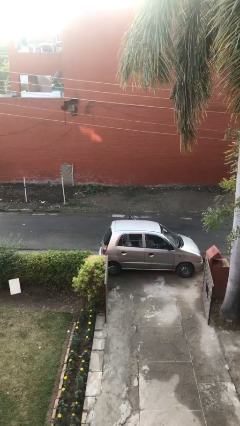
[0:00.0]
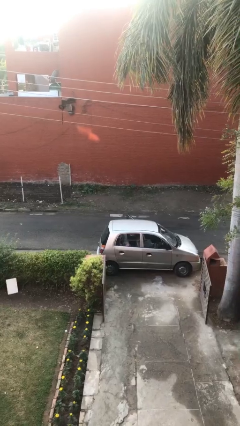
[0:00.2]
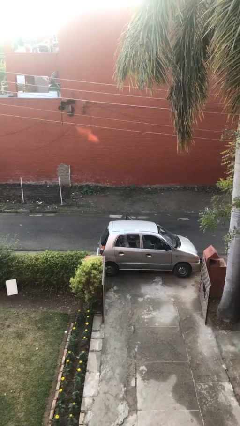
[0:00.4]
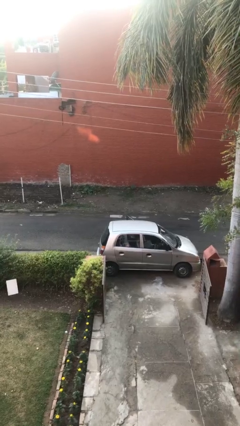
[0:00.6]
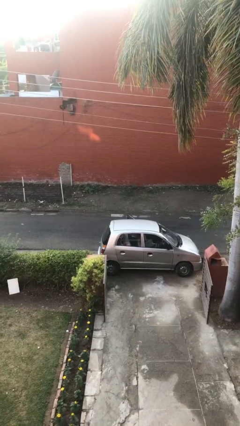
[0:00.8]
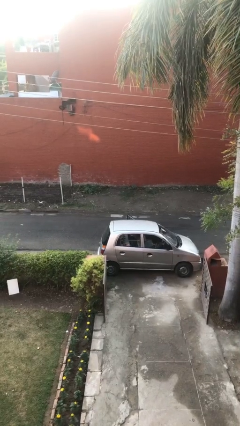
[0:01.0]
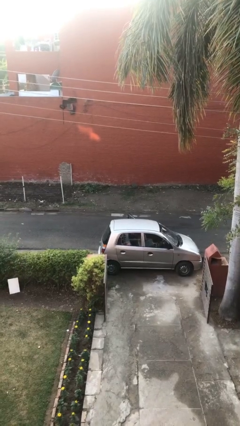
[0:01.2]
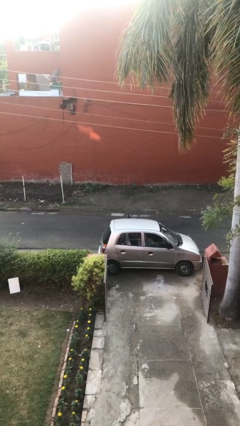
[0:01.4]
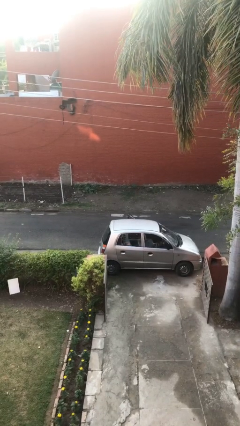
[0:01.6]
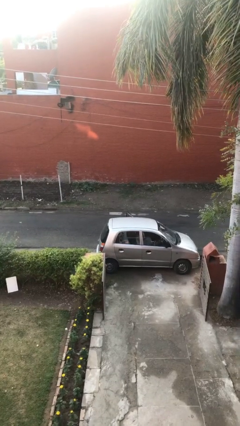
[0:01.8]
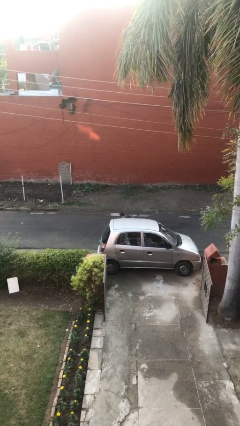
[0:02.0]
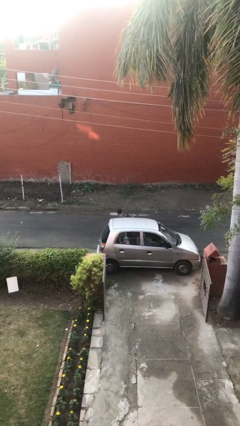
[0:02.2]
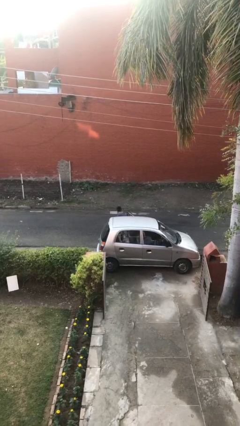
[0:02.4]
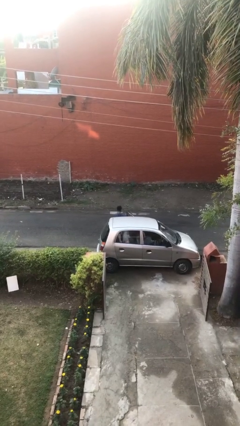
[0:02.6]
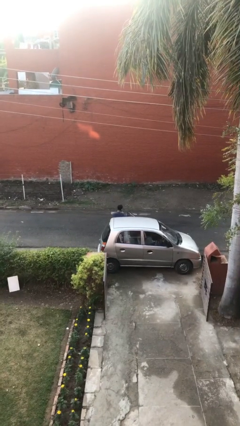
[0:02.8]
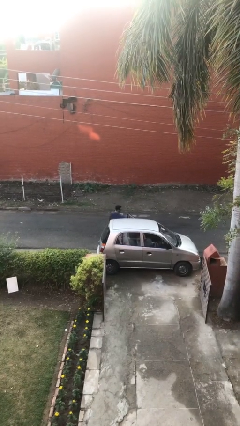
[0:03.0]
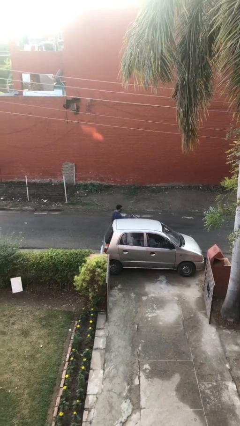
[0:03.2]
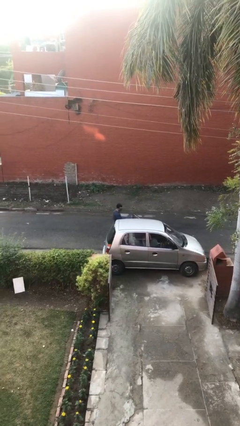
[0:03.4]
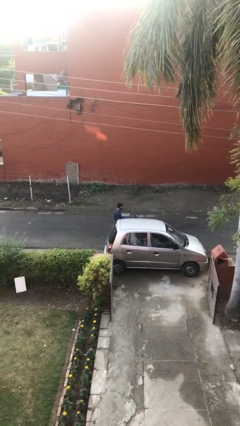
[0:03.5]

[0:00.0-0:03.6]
person exits car

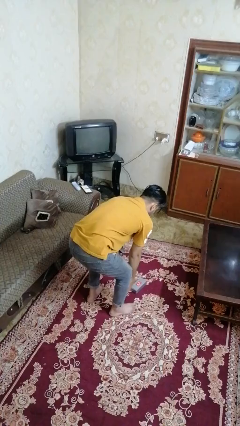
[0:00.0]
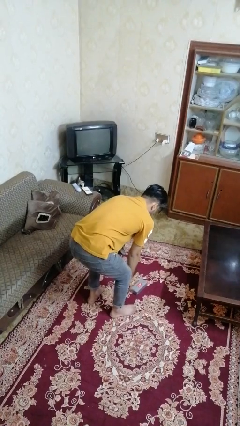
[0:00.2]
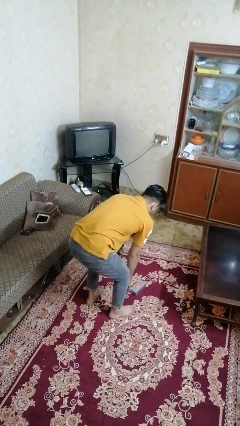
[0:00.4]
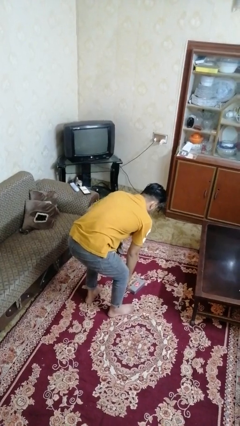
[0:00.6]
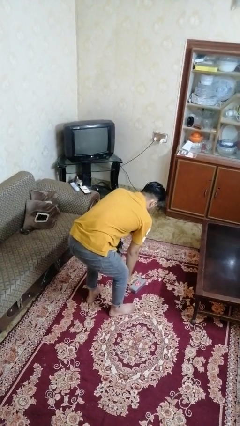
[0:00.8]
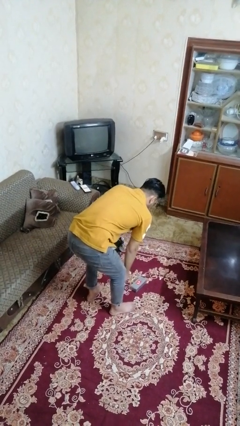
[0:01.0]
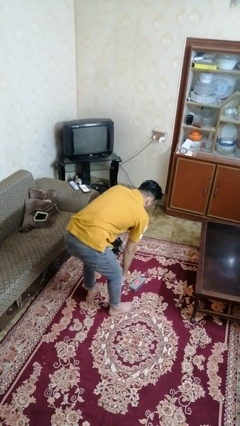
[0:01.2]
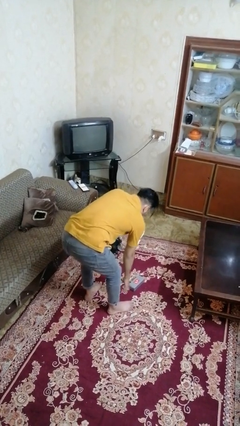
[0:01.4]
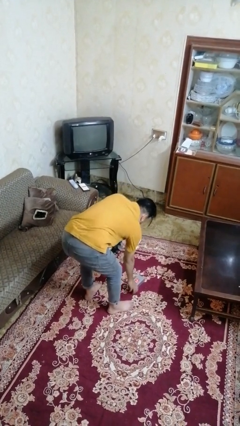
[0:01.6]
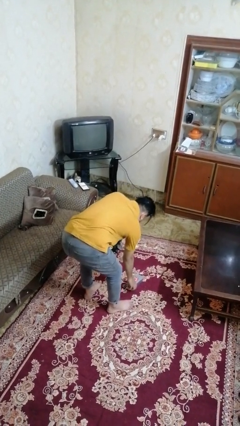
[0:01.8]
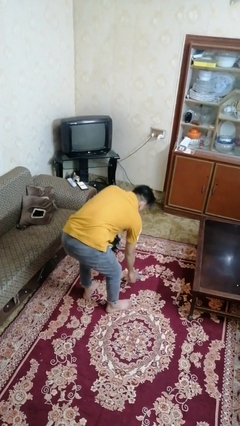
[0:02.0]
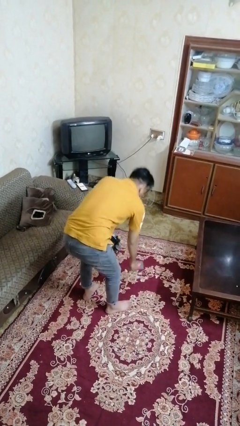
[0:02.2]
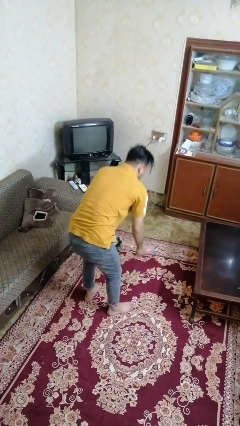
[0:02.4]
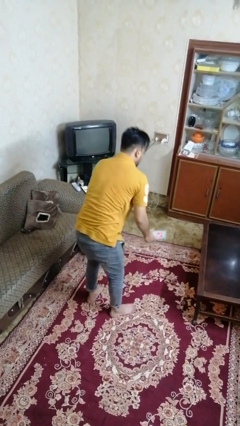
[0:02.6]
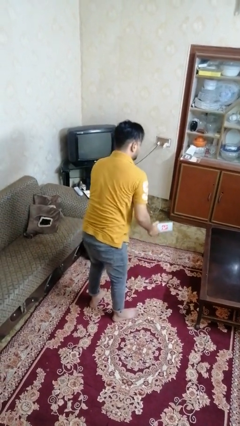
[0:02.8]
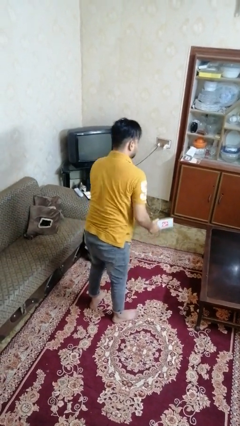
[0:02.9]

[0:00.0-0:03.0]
person picks up object from floor

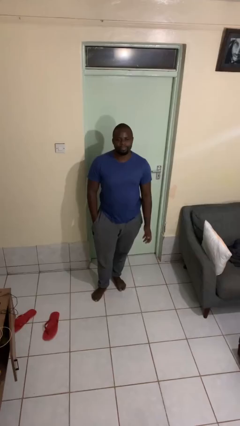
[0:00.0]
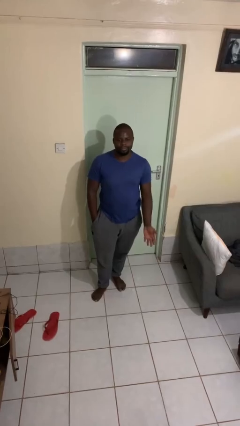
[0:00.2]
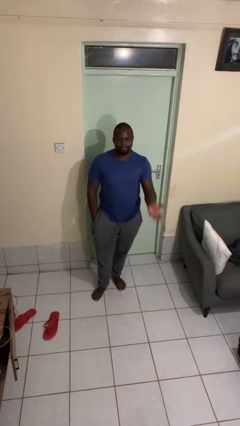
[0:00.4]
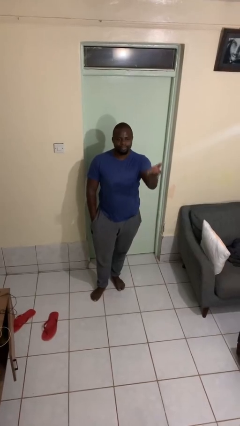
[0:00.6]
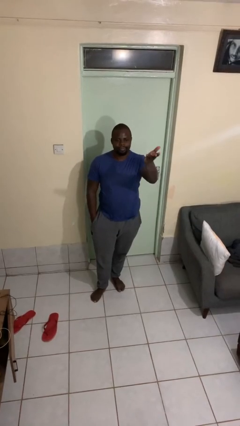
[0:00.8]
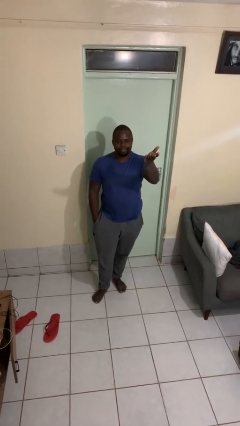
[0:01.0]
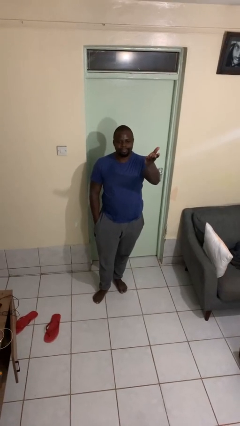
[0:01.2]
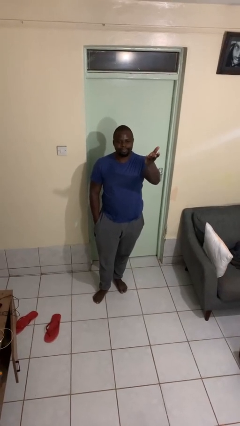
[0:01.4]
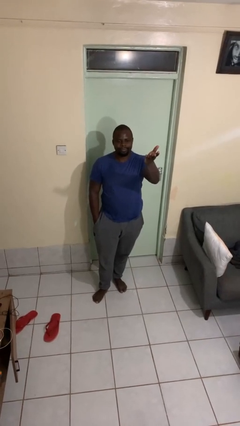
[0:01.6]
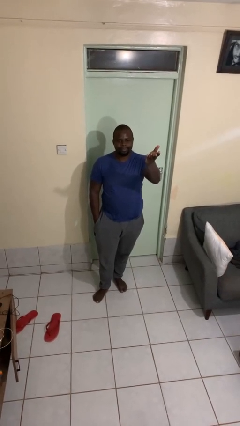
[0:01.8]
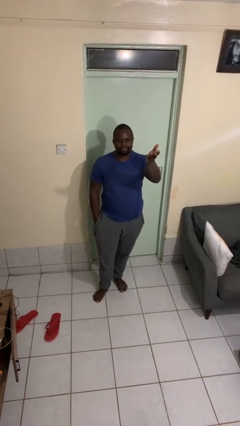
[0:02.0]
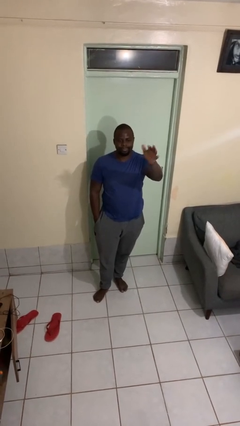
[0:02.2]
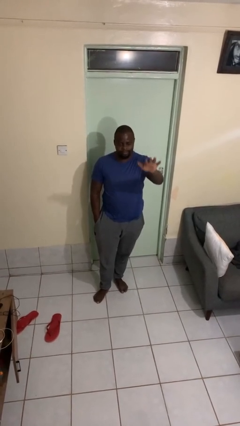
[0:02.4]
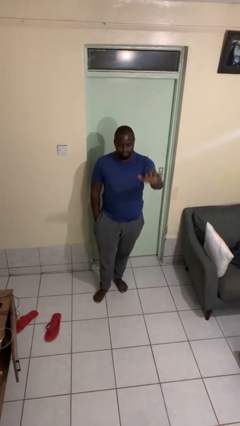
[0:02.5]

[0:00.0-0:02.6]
person gestures swipe up

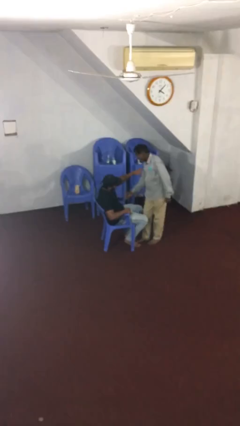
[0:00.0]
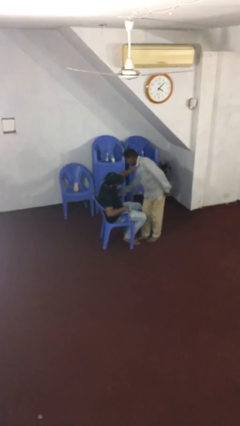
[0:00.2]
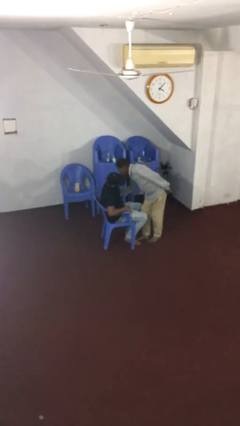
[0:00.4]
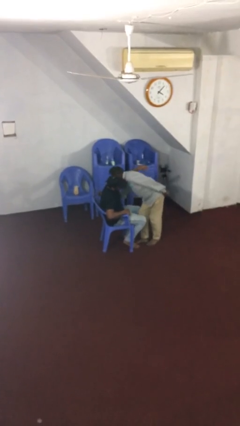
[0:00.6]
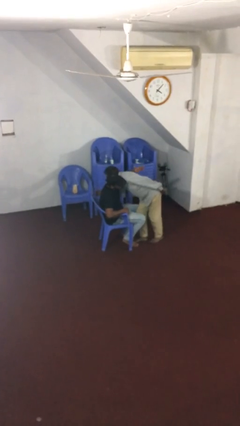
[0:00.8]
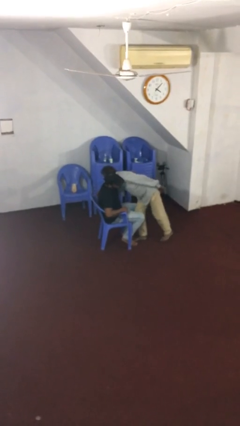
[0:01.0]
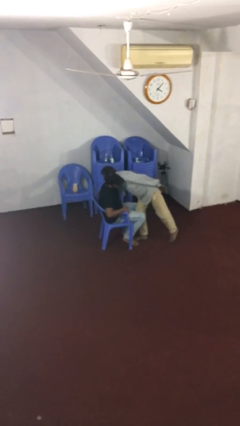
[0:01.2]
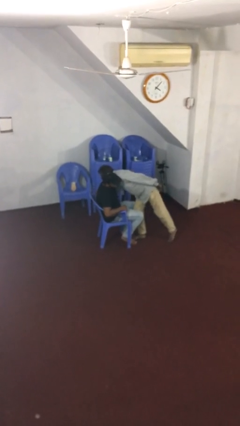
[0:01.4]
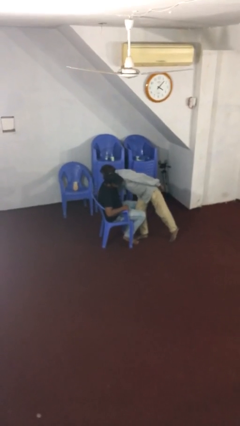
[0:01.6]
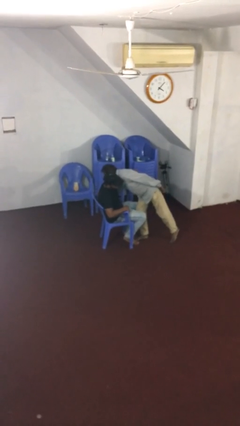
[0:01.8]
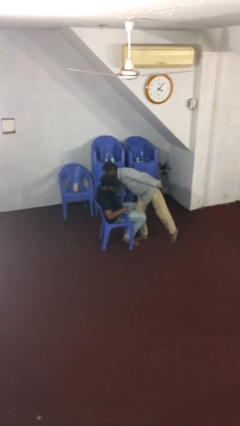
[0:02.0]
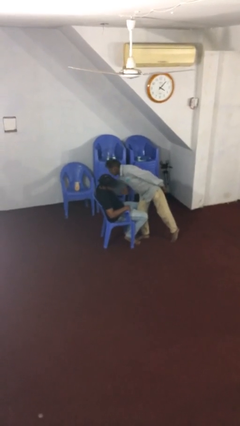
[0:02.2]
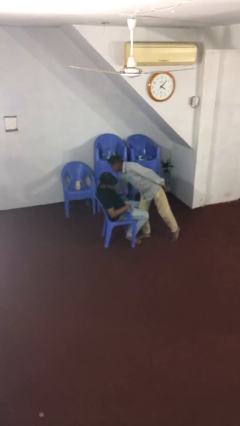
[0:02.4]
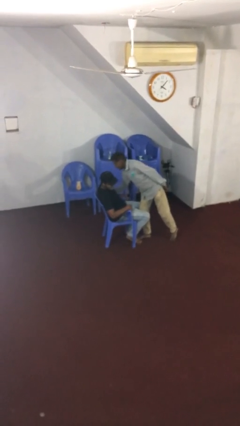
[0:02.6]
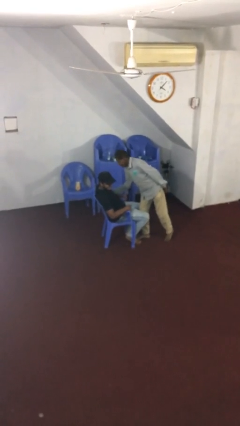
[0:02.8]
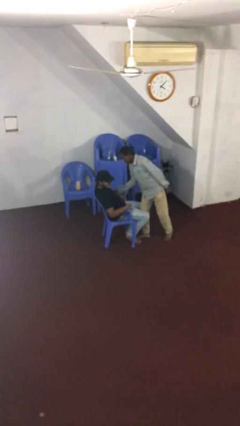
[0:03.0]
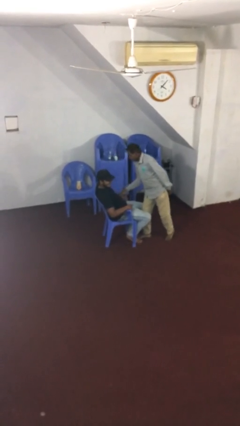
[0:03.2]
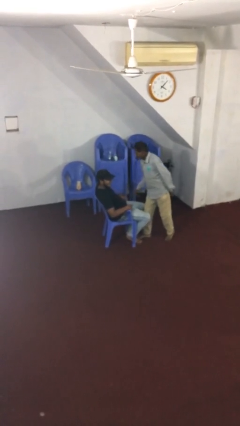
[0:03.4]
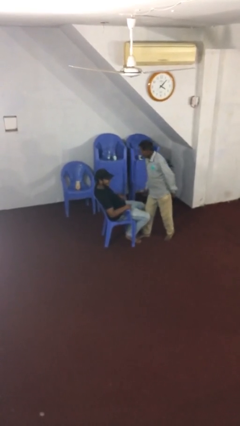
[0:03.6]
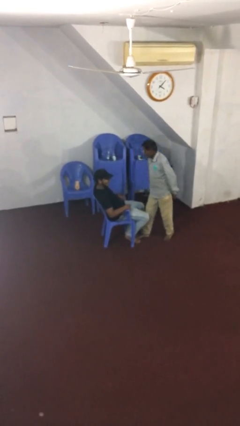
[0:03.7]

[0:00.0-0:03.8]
person embraces person

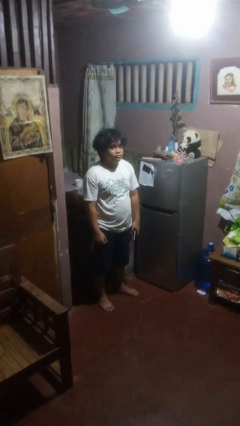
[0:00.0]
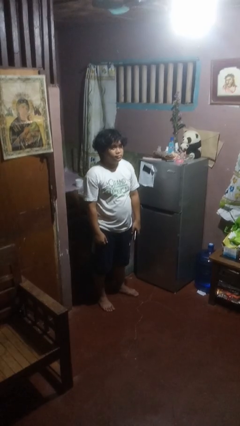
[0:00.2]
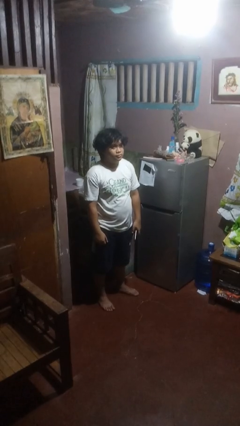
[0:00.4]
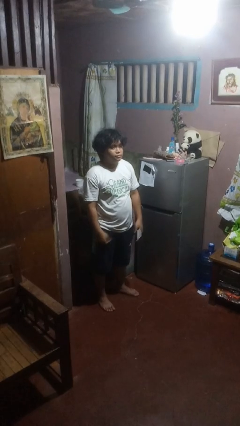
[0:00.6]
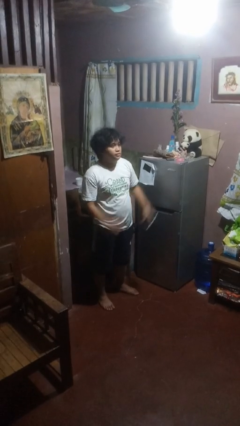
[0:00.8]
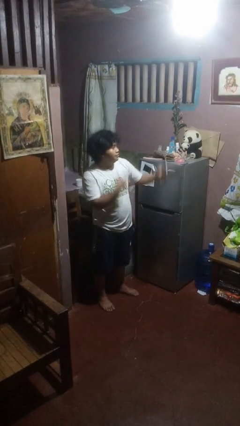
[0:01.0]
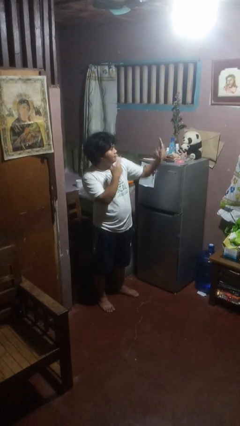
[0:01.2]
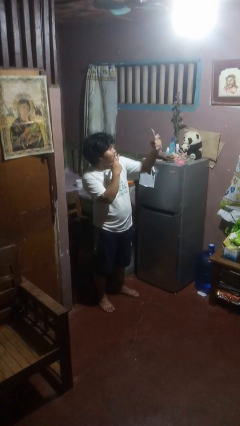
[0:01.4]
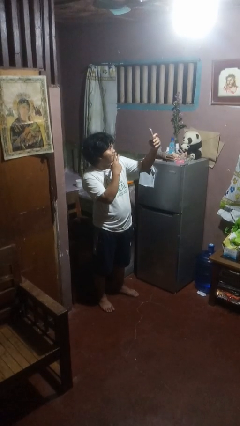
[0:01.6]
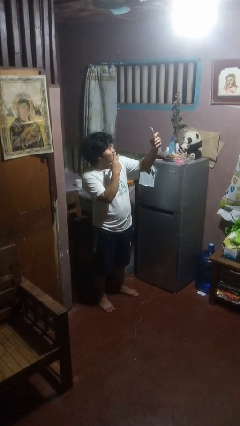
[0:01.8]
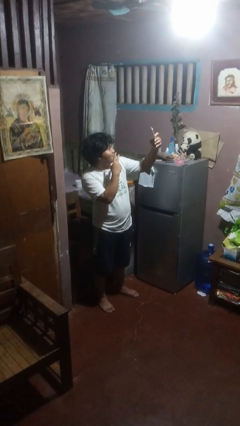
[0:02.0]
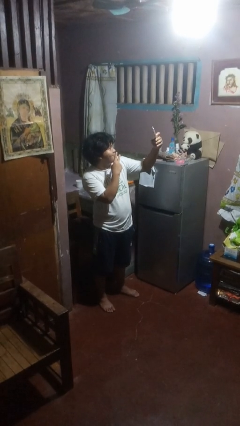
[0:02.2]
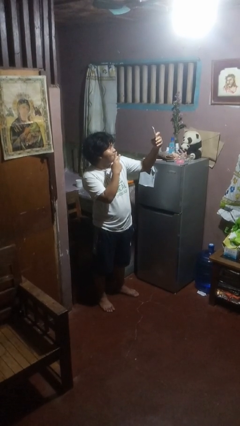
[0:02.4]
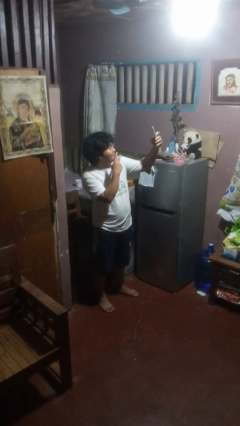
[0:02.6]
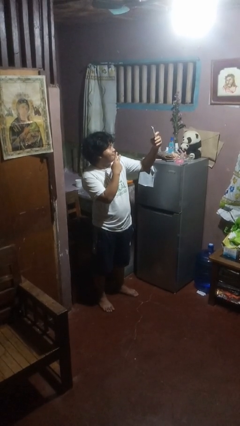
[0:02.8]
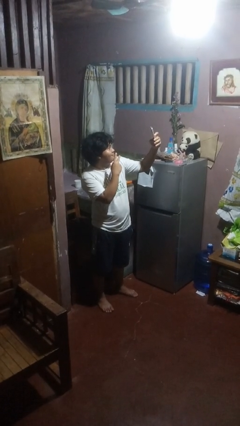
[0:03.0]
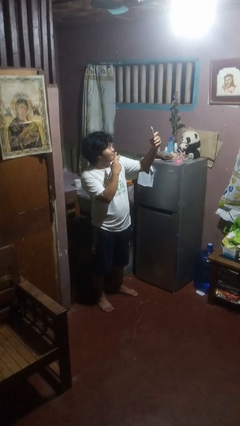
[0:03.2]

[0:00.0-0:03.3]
person takes selfie

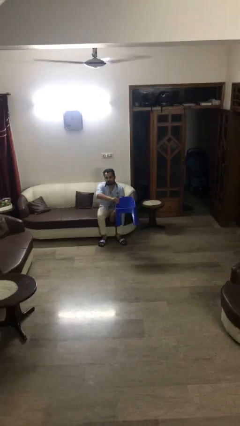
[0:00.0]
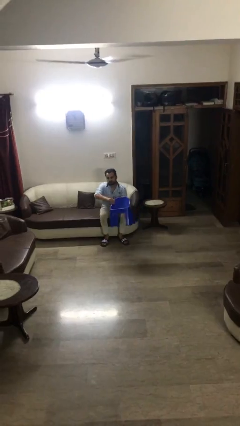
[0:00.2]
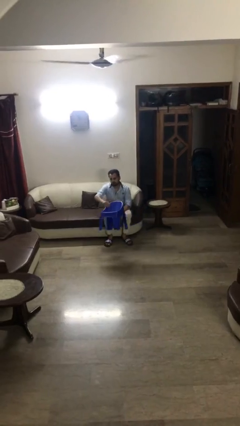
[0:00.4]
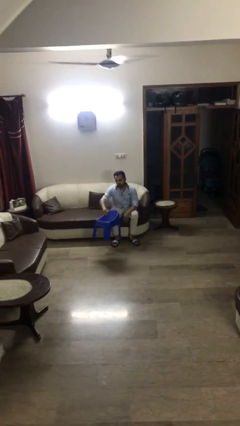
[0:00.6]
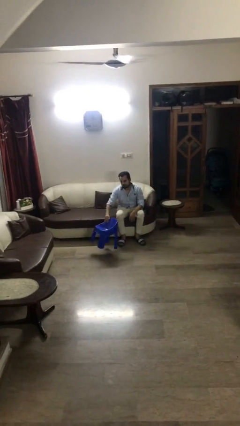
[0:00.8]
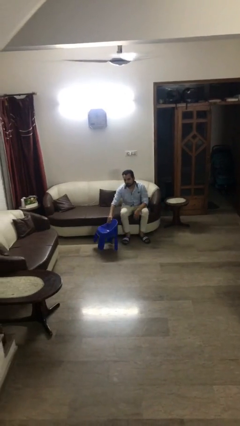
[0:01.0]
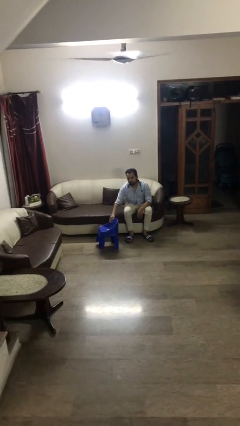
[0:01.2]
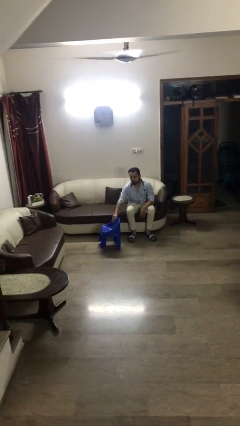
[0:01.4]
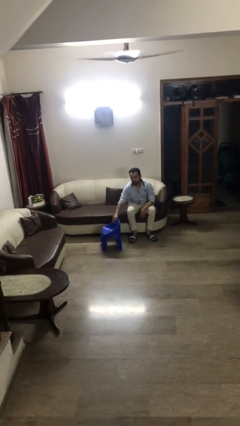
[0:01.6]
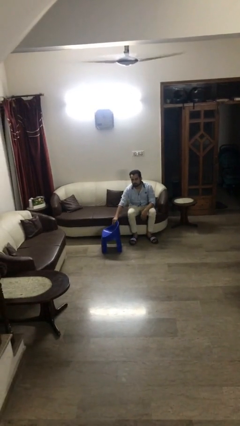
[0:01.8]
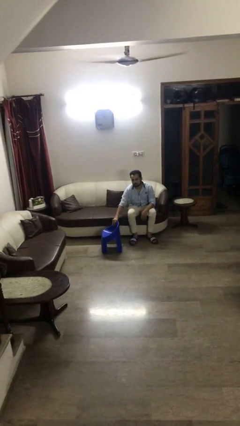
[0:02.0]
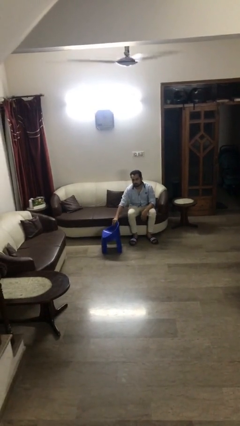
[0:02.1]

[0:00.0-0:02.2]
person puts down object on floor
